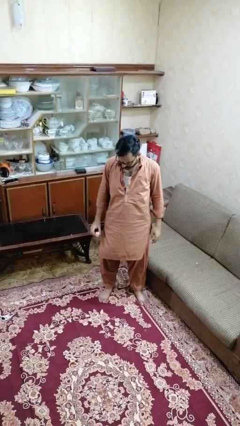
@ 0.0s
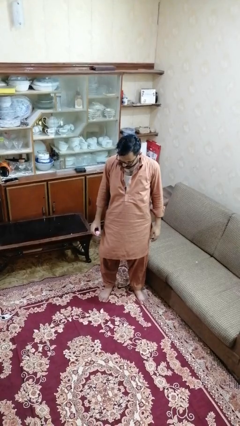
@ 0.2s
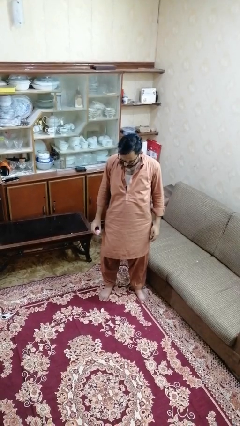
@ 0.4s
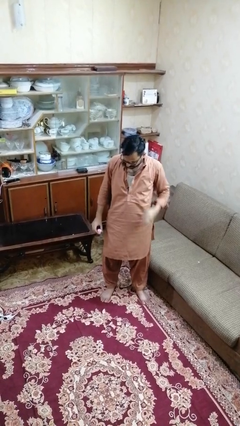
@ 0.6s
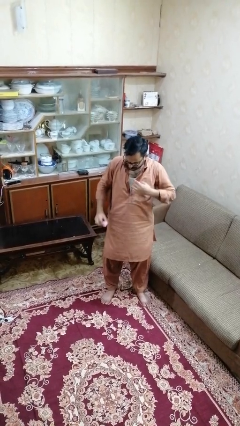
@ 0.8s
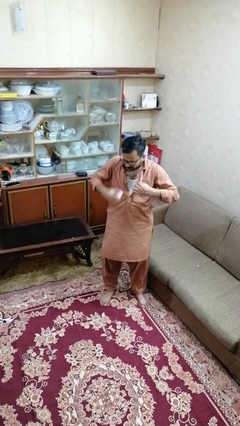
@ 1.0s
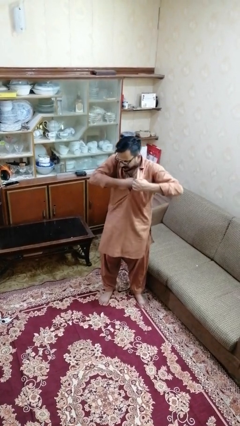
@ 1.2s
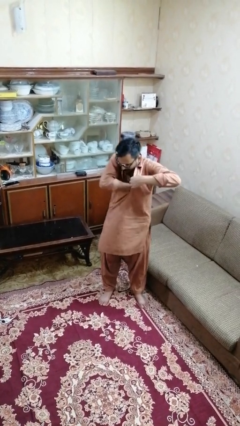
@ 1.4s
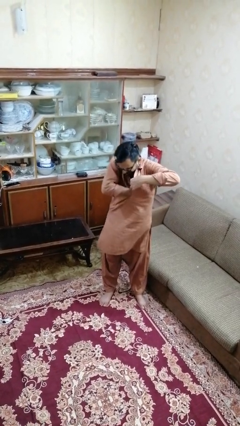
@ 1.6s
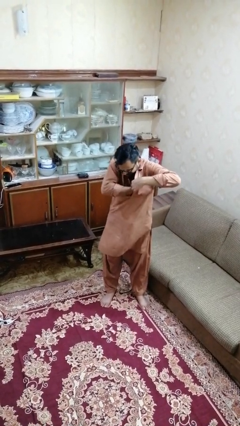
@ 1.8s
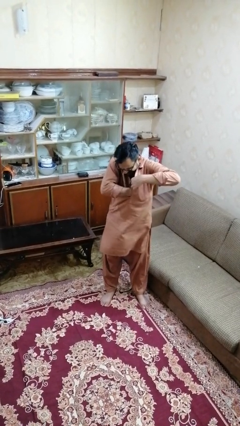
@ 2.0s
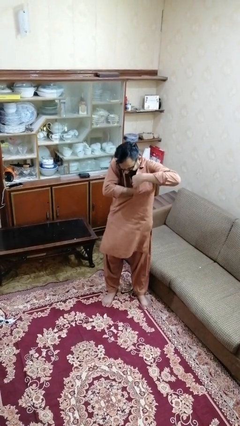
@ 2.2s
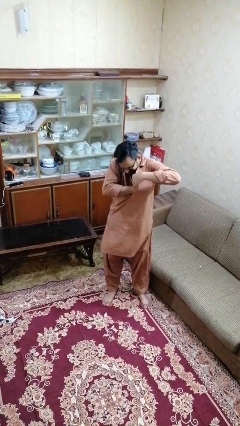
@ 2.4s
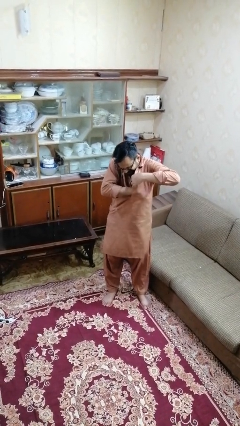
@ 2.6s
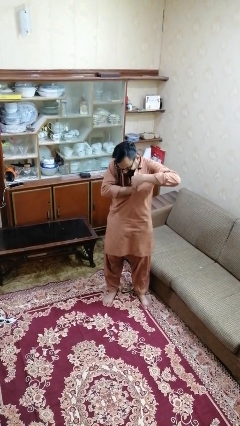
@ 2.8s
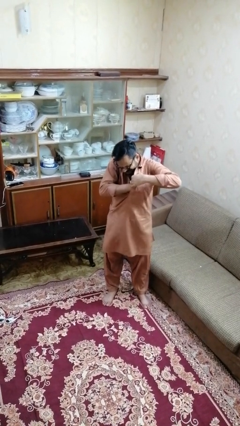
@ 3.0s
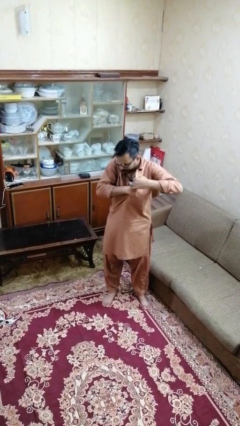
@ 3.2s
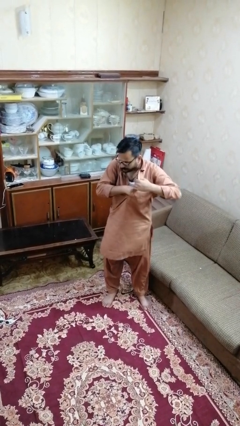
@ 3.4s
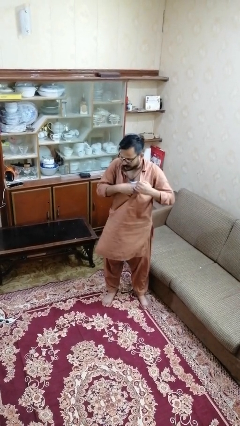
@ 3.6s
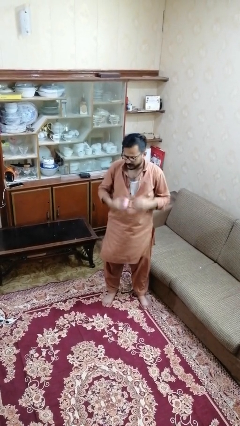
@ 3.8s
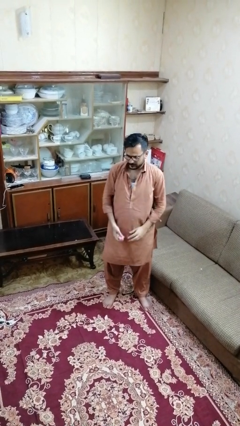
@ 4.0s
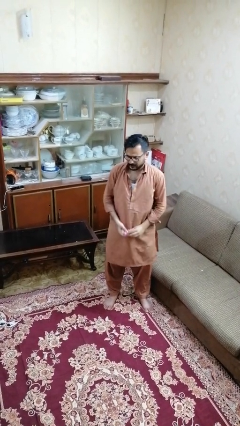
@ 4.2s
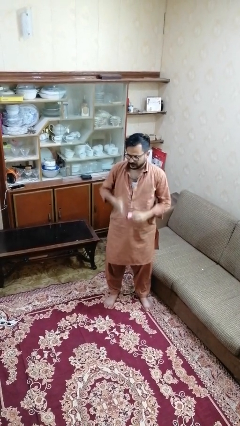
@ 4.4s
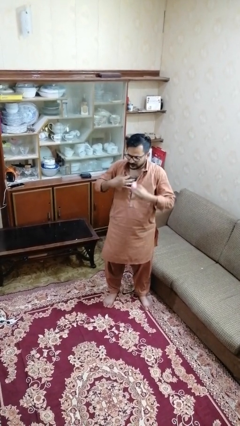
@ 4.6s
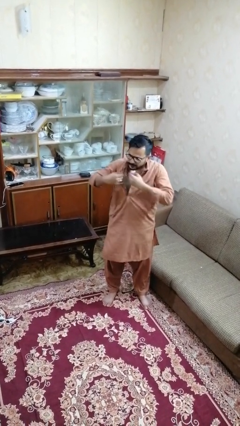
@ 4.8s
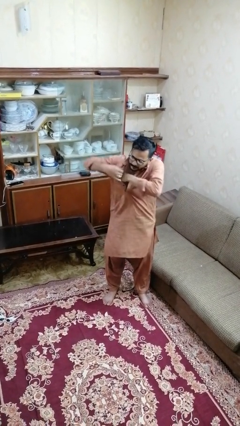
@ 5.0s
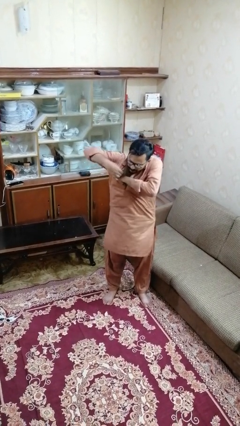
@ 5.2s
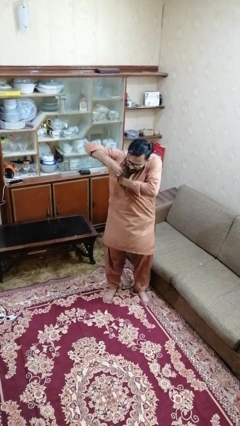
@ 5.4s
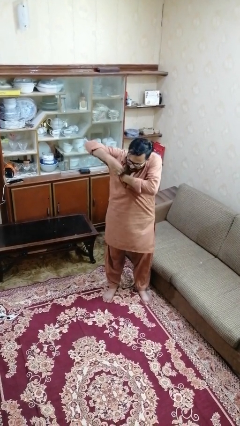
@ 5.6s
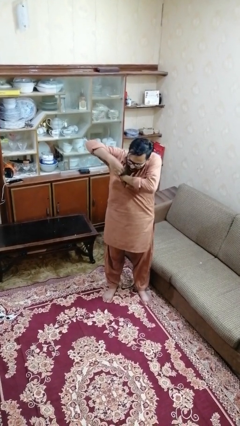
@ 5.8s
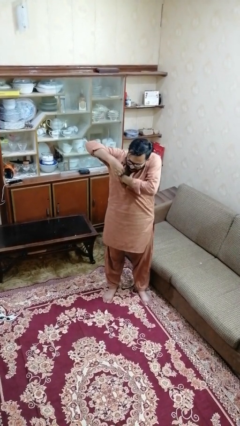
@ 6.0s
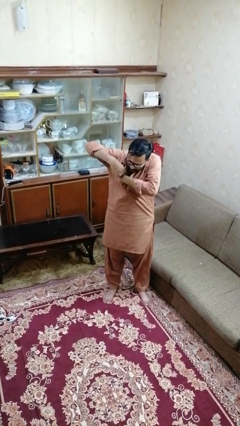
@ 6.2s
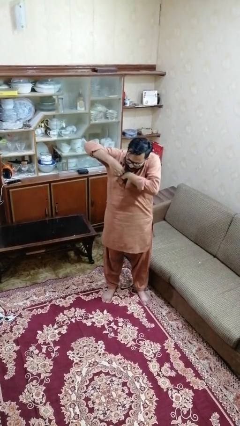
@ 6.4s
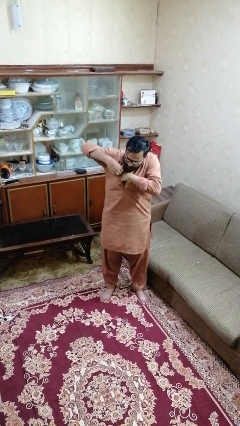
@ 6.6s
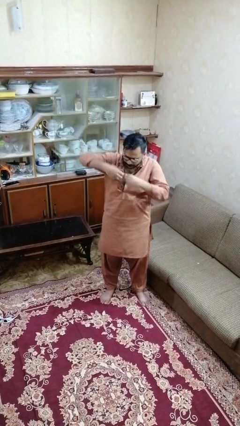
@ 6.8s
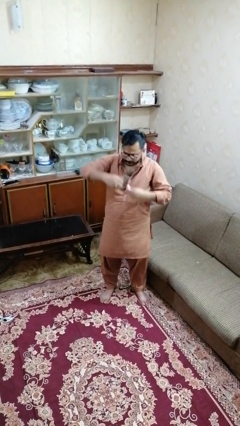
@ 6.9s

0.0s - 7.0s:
person applies deodorant

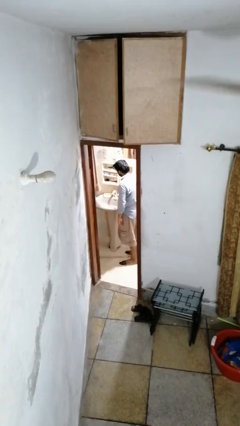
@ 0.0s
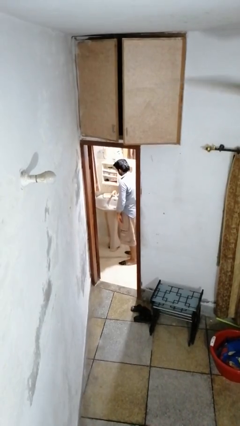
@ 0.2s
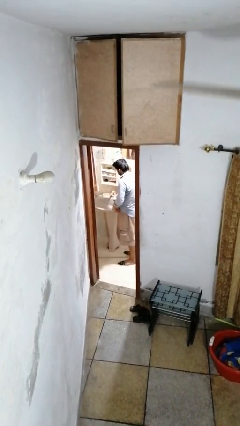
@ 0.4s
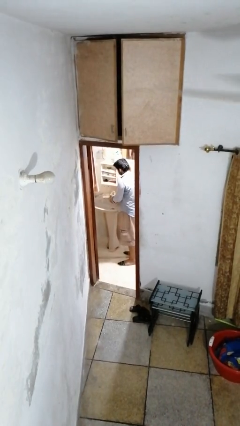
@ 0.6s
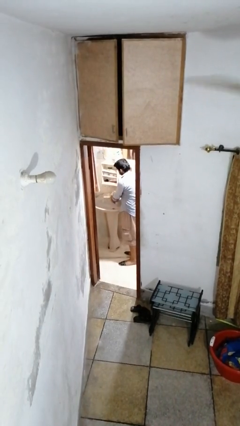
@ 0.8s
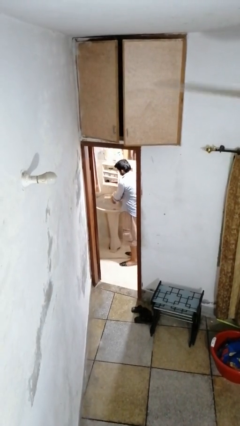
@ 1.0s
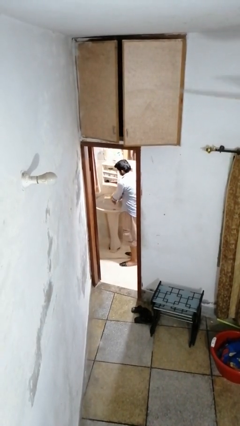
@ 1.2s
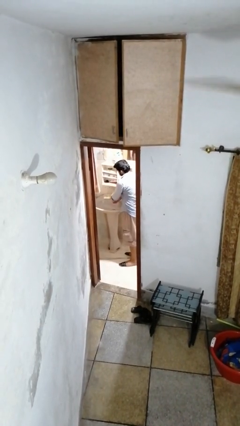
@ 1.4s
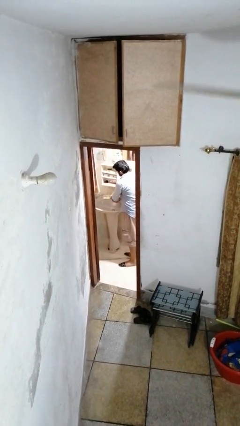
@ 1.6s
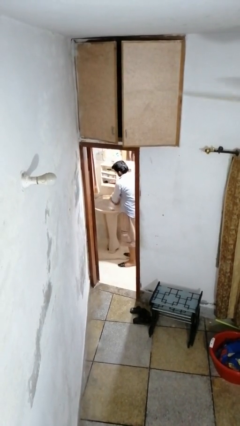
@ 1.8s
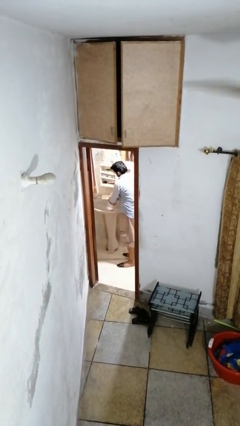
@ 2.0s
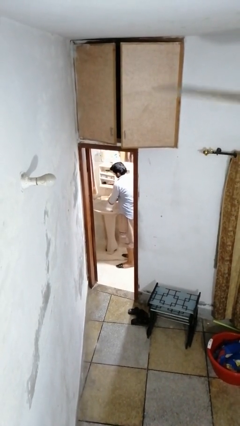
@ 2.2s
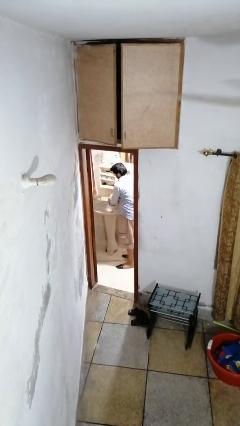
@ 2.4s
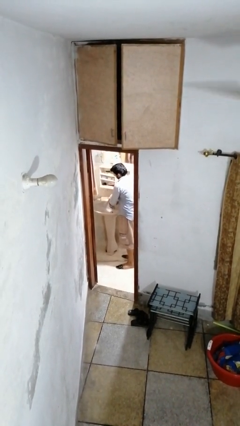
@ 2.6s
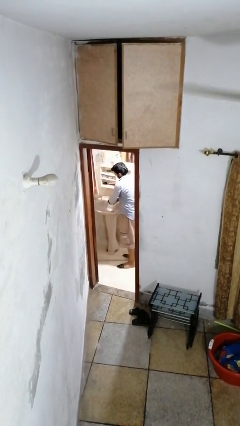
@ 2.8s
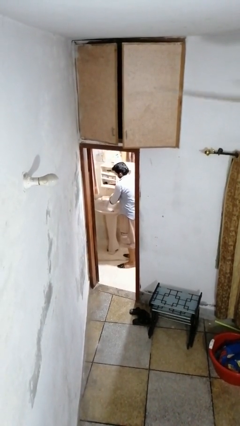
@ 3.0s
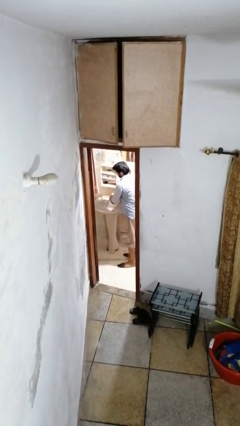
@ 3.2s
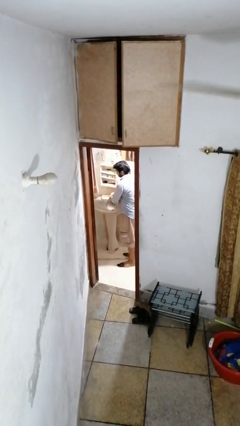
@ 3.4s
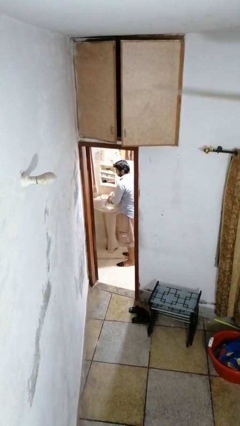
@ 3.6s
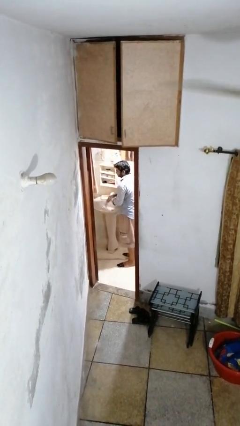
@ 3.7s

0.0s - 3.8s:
person washes hands

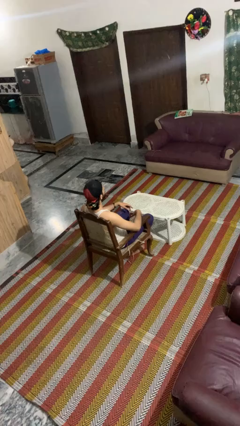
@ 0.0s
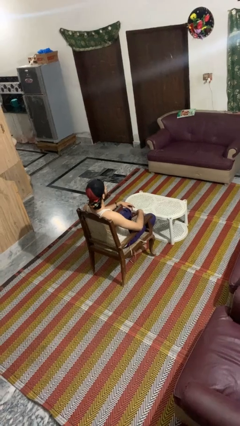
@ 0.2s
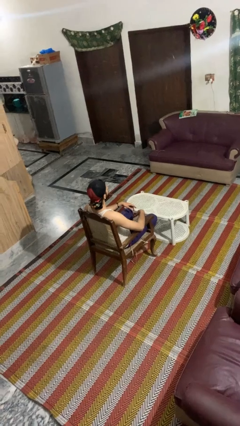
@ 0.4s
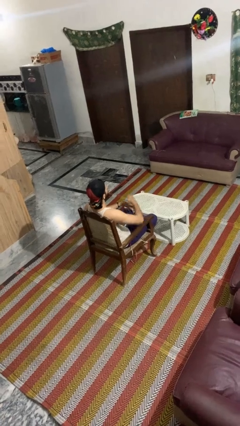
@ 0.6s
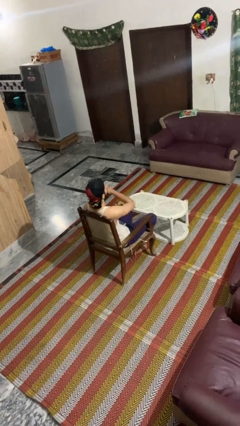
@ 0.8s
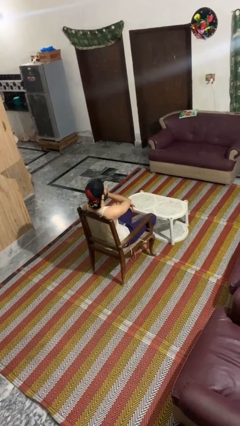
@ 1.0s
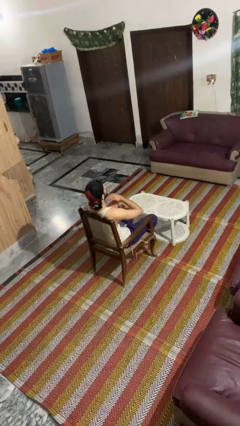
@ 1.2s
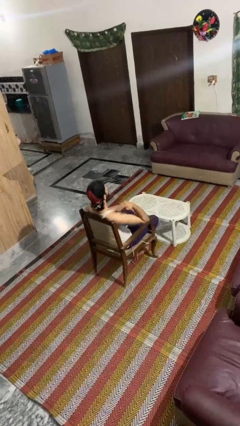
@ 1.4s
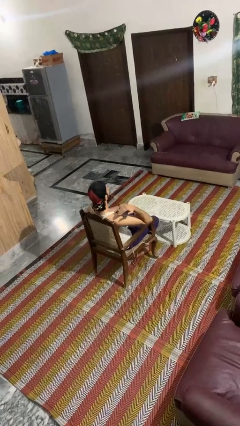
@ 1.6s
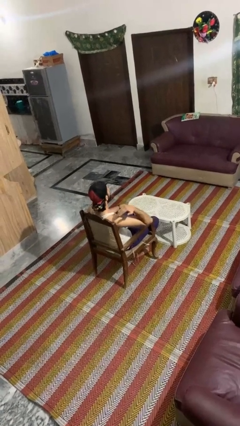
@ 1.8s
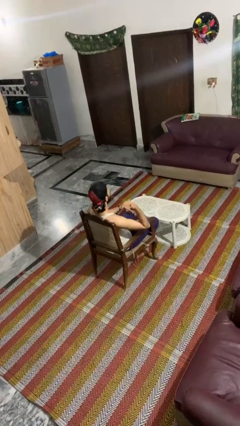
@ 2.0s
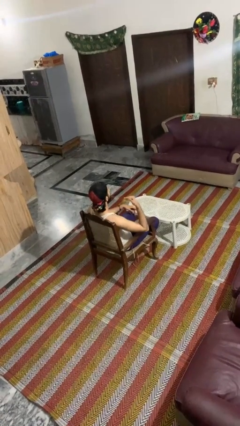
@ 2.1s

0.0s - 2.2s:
person gestures cut

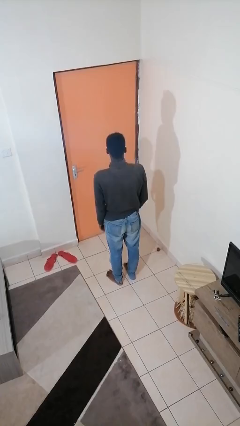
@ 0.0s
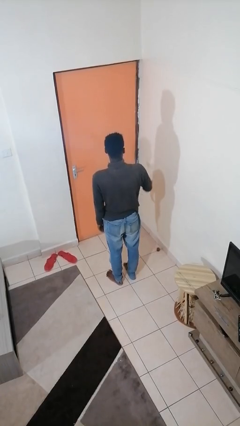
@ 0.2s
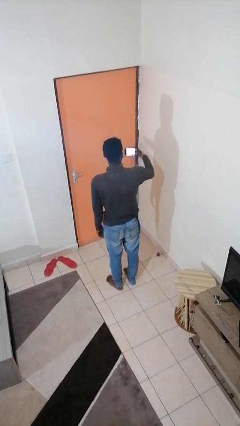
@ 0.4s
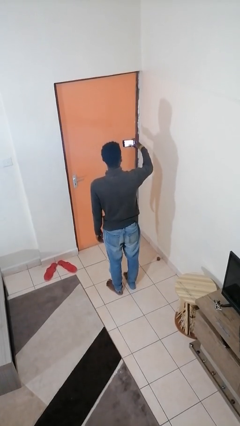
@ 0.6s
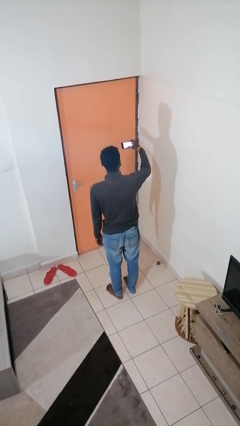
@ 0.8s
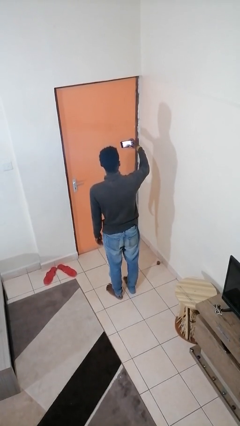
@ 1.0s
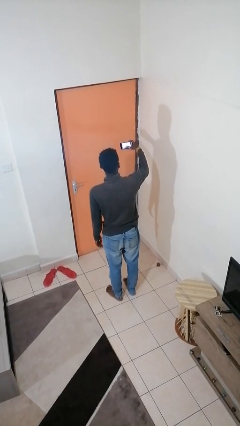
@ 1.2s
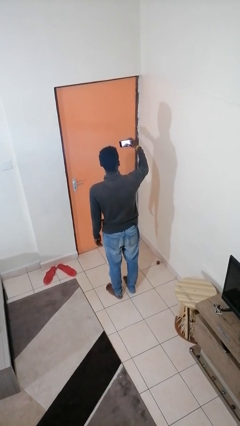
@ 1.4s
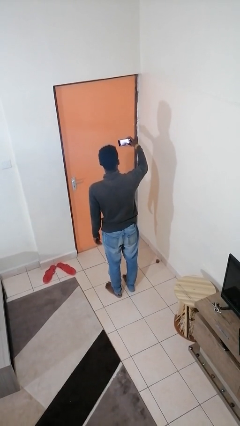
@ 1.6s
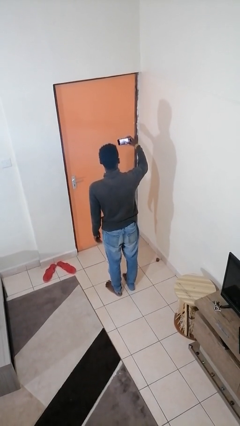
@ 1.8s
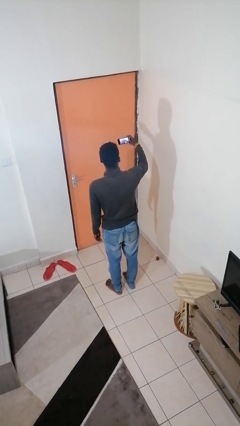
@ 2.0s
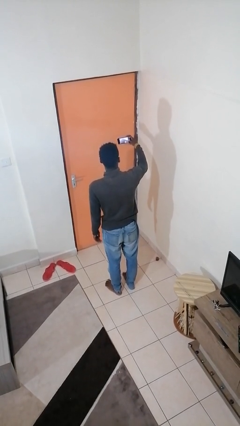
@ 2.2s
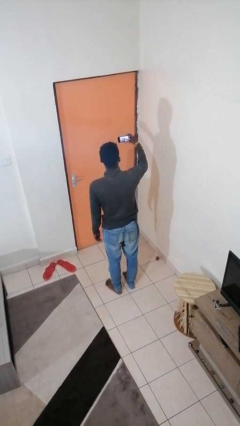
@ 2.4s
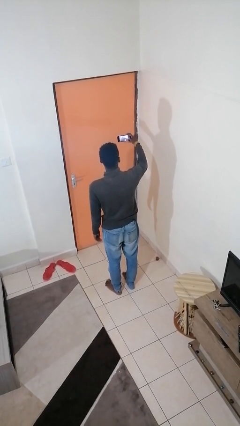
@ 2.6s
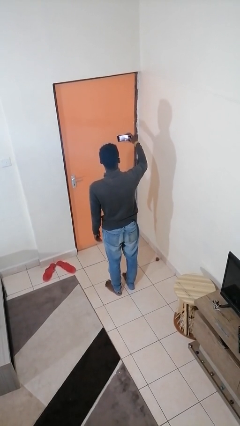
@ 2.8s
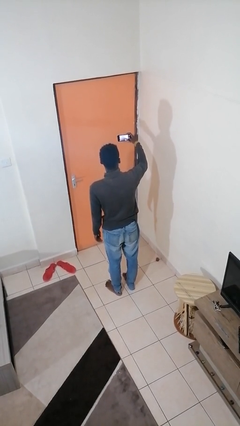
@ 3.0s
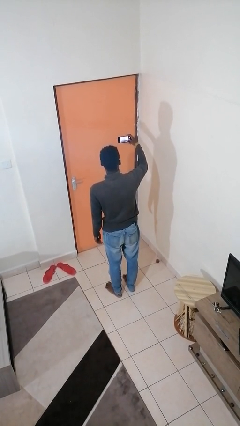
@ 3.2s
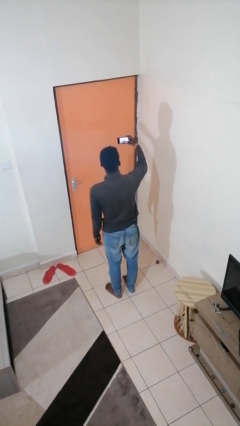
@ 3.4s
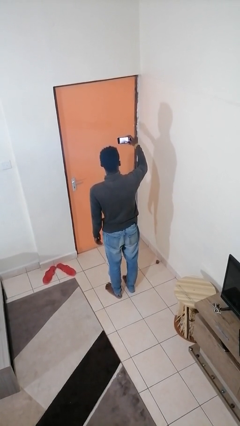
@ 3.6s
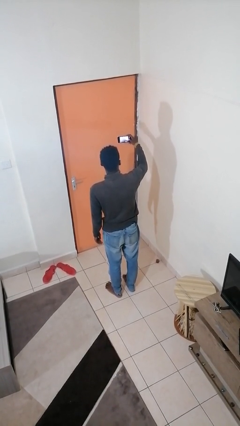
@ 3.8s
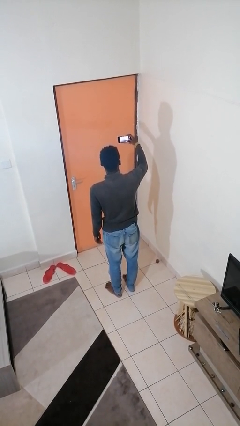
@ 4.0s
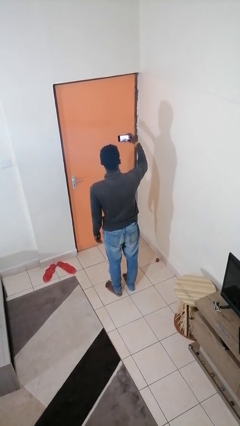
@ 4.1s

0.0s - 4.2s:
person takes selfie

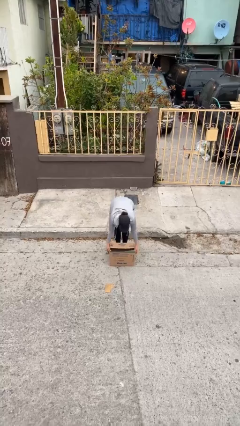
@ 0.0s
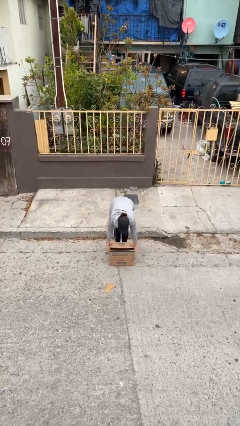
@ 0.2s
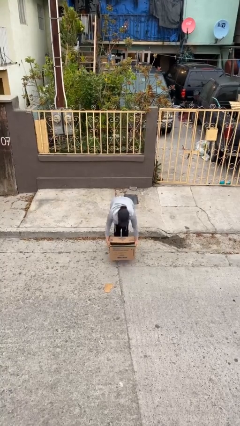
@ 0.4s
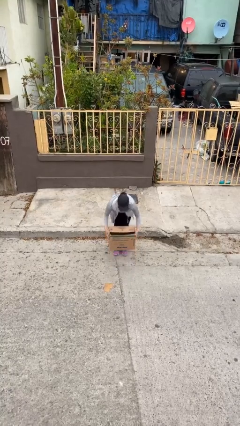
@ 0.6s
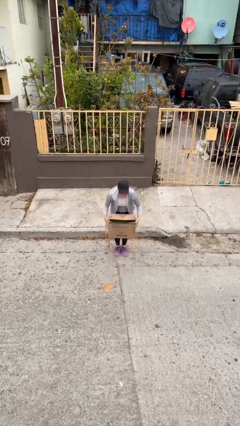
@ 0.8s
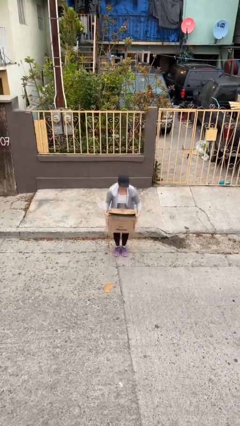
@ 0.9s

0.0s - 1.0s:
person picks up object from floor
